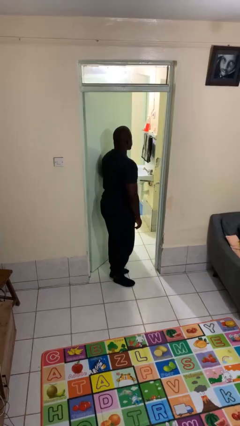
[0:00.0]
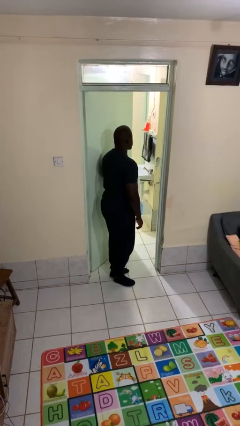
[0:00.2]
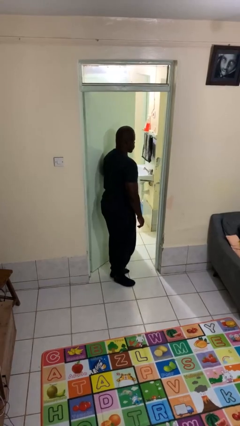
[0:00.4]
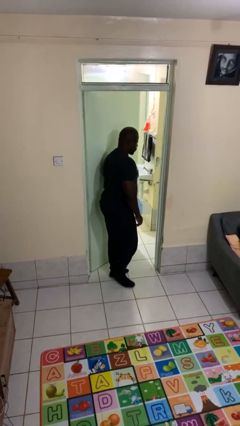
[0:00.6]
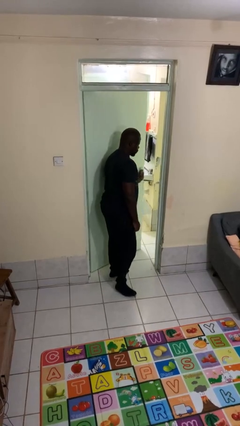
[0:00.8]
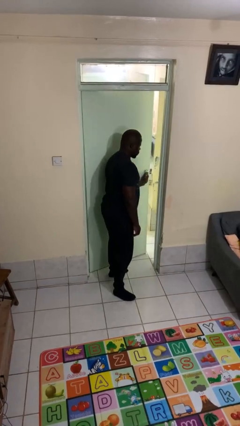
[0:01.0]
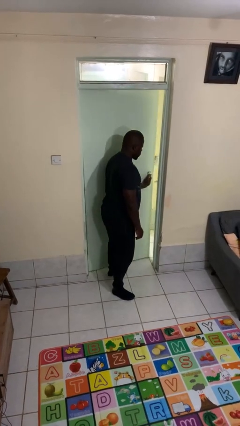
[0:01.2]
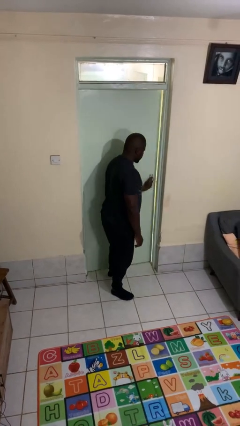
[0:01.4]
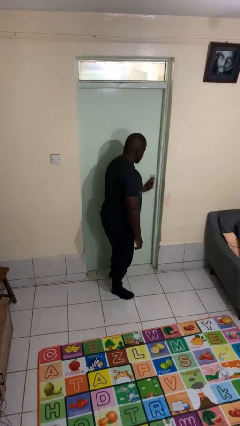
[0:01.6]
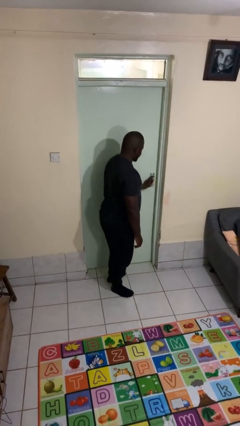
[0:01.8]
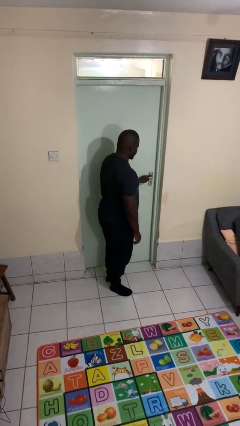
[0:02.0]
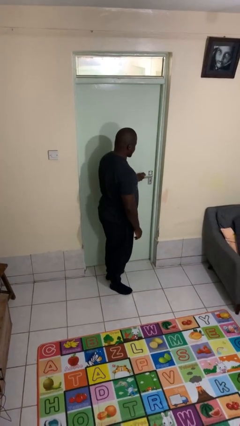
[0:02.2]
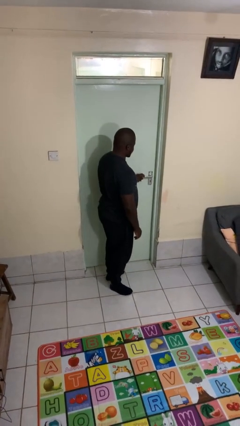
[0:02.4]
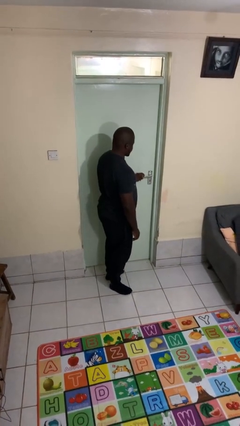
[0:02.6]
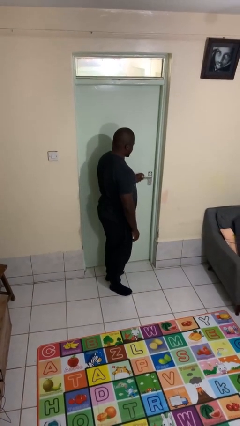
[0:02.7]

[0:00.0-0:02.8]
person closes facility door

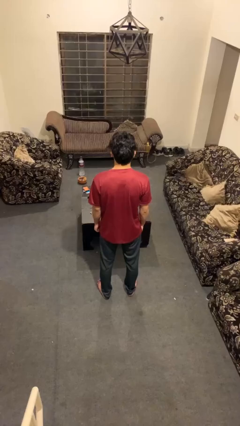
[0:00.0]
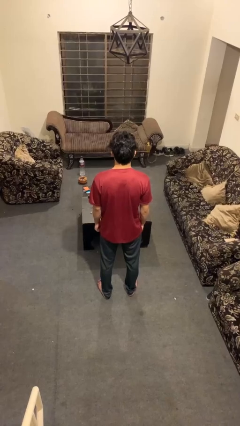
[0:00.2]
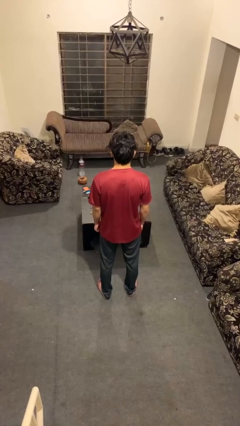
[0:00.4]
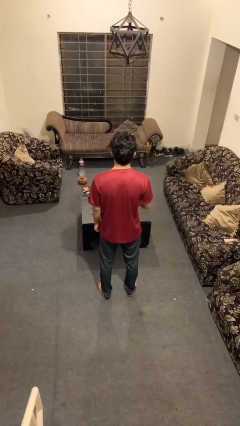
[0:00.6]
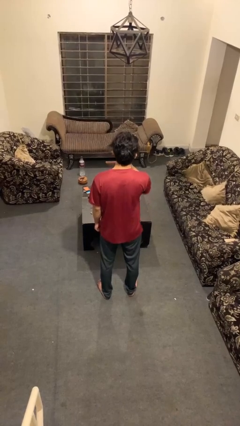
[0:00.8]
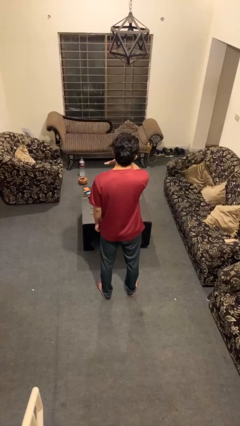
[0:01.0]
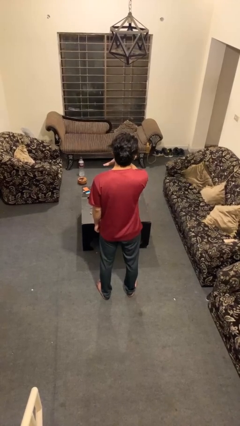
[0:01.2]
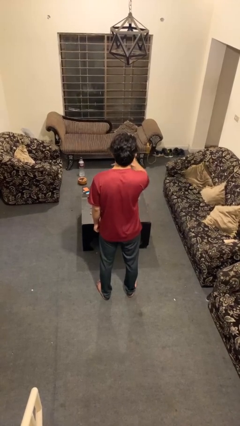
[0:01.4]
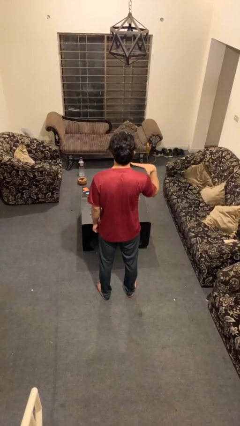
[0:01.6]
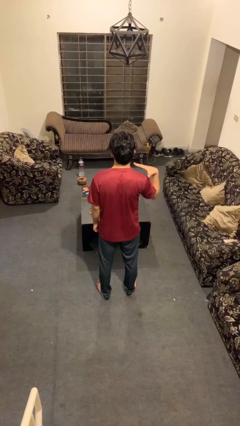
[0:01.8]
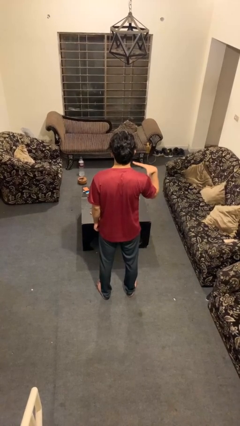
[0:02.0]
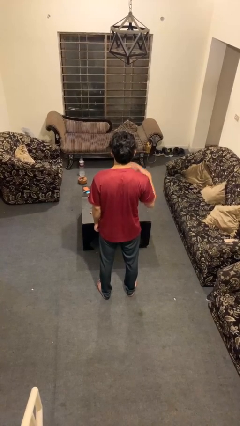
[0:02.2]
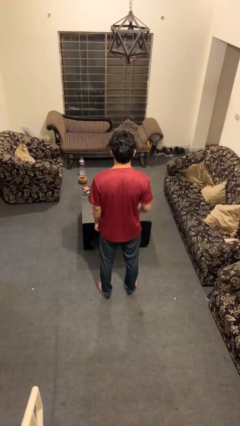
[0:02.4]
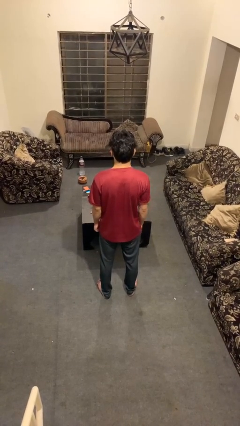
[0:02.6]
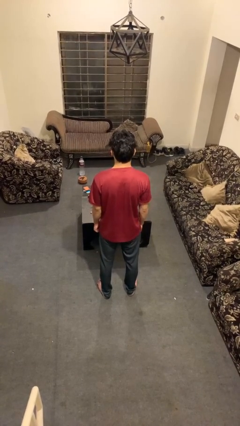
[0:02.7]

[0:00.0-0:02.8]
person gestures cut

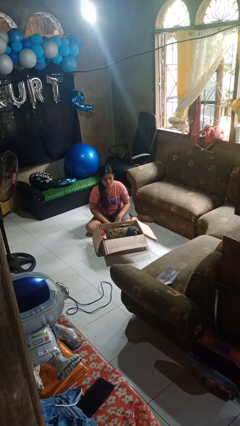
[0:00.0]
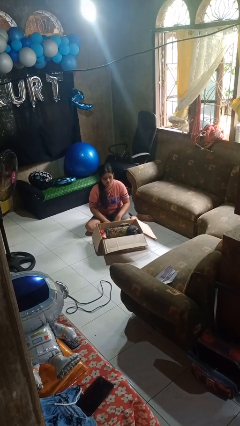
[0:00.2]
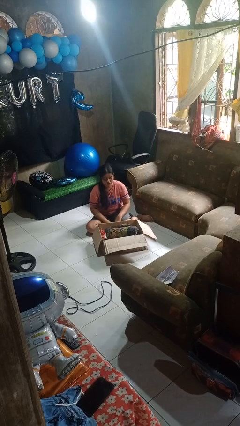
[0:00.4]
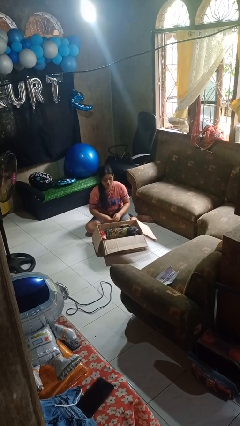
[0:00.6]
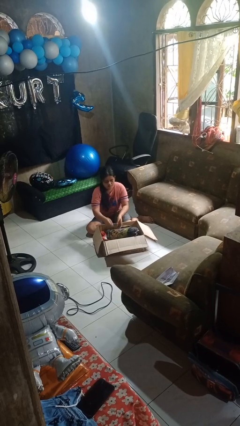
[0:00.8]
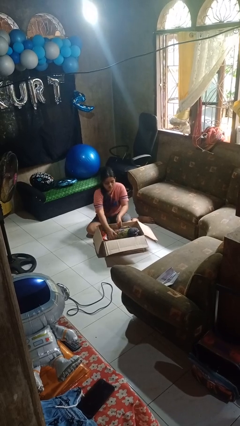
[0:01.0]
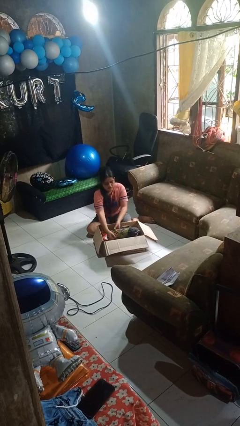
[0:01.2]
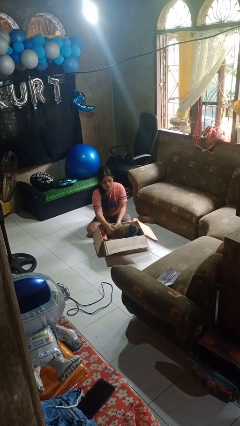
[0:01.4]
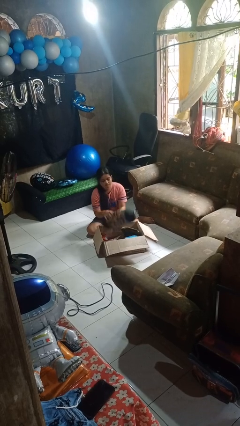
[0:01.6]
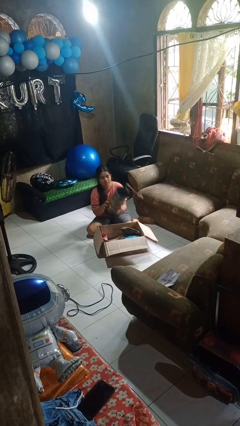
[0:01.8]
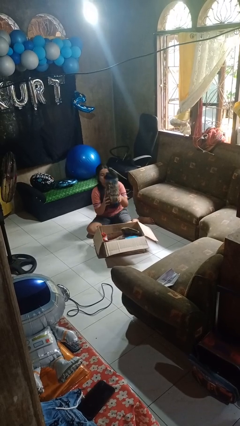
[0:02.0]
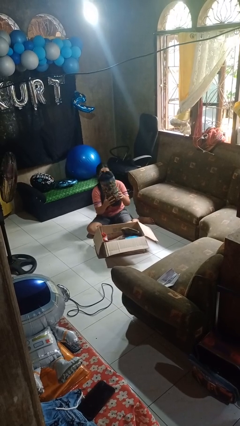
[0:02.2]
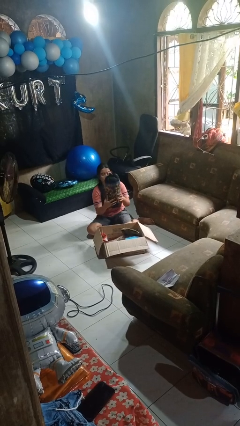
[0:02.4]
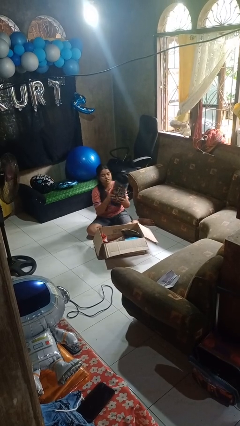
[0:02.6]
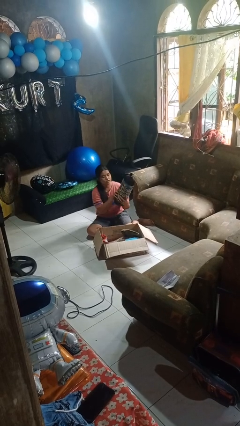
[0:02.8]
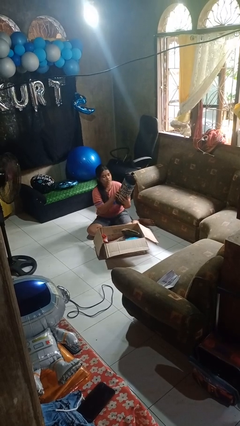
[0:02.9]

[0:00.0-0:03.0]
person takes object from box

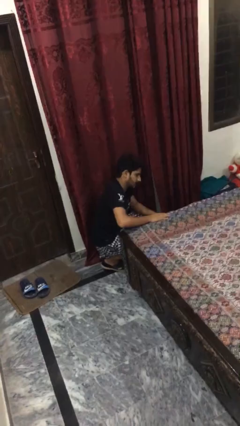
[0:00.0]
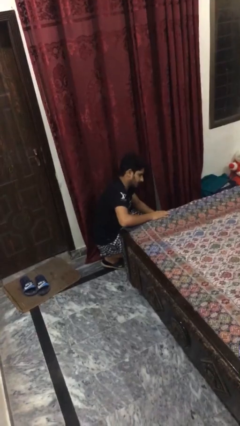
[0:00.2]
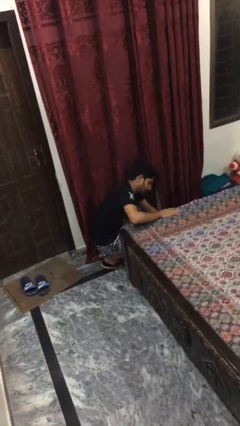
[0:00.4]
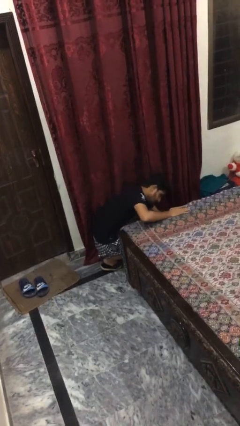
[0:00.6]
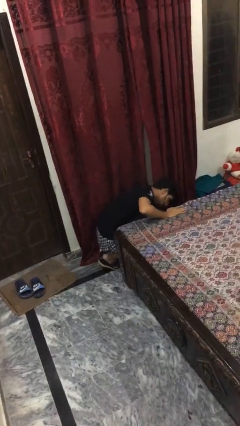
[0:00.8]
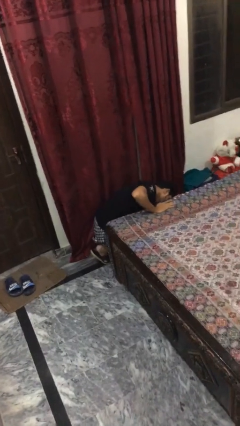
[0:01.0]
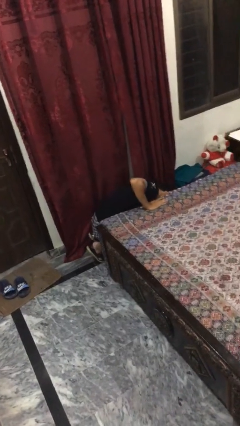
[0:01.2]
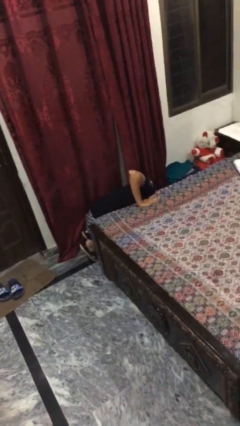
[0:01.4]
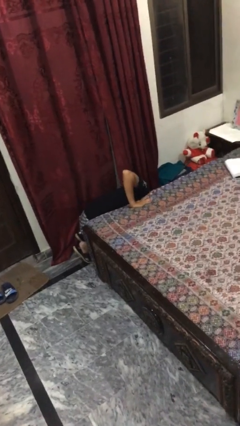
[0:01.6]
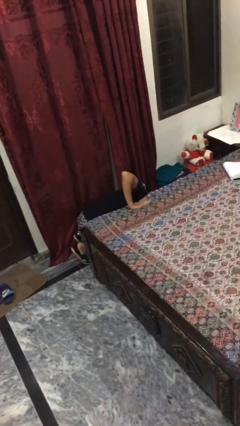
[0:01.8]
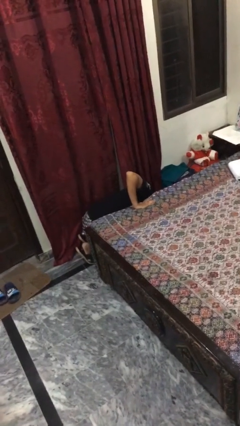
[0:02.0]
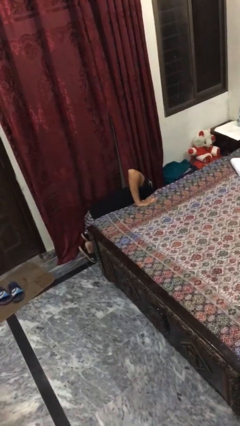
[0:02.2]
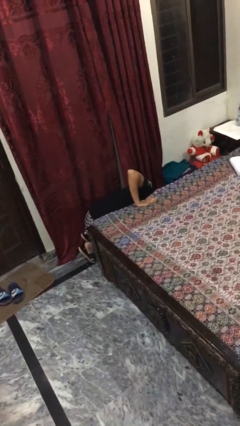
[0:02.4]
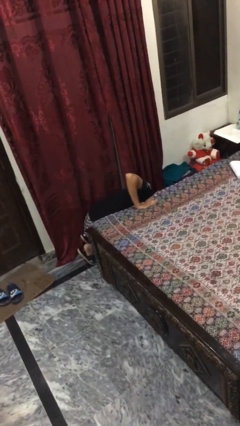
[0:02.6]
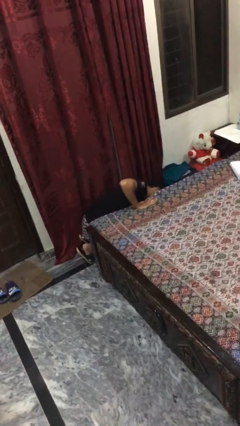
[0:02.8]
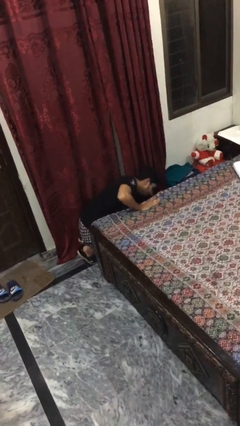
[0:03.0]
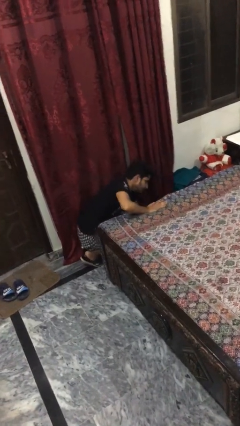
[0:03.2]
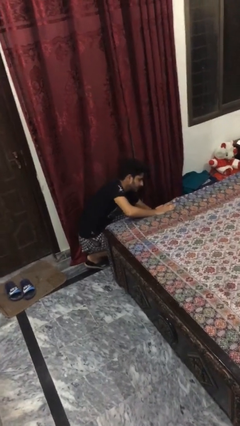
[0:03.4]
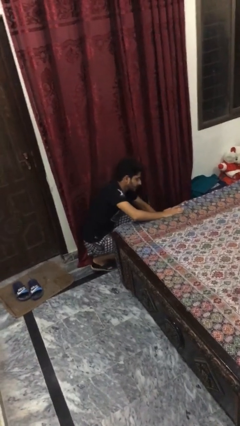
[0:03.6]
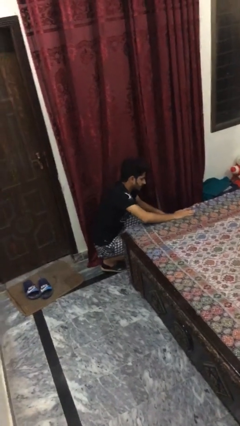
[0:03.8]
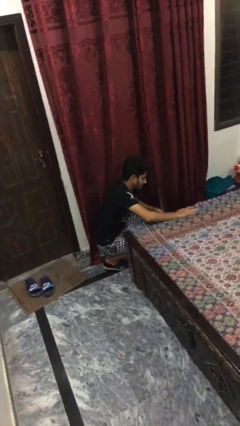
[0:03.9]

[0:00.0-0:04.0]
person searches under bed

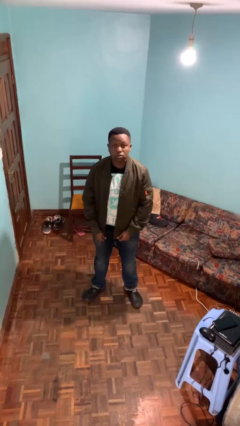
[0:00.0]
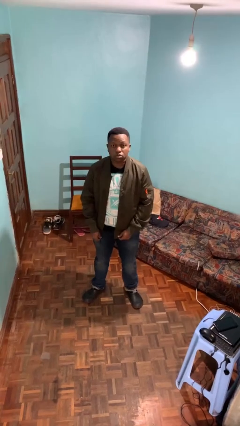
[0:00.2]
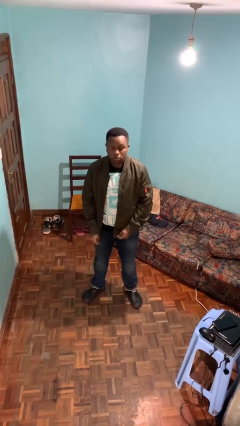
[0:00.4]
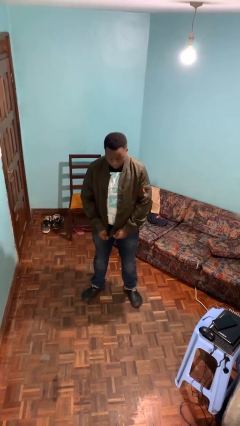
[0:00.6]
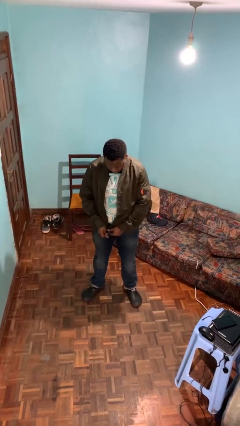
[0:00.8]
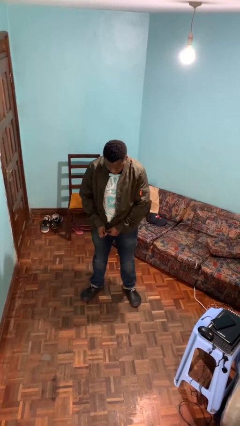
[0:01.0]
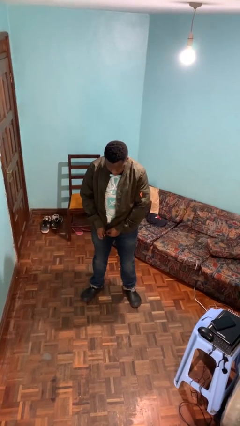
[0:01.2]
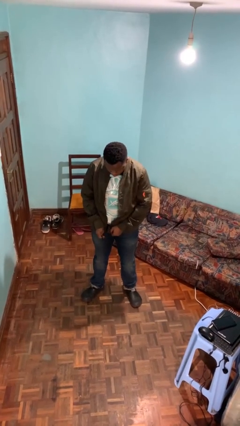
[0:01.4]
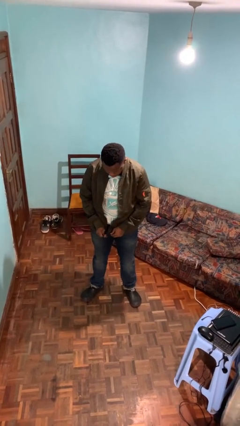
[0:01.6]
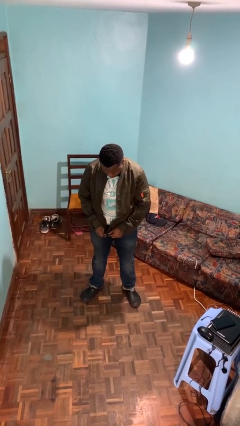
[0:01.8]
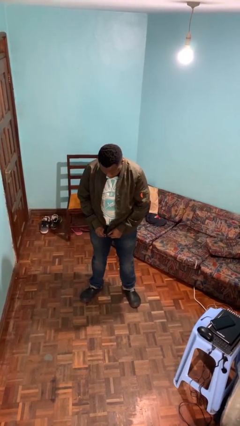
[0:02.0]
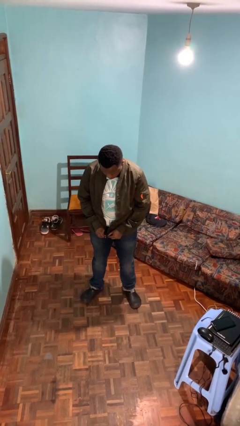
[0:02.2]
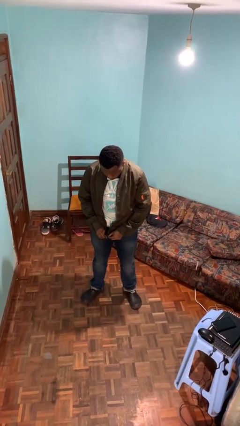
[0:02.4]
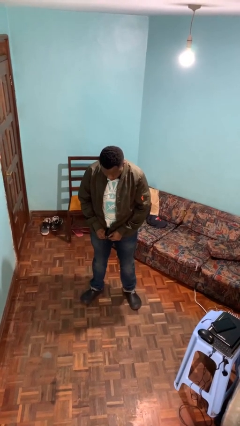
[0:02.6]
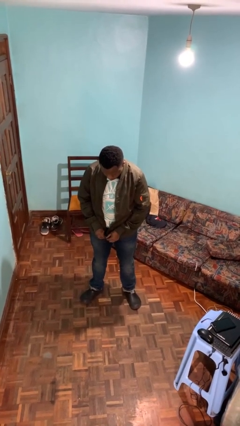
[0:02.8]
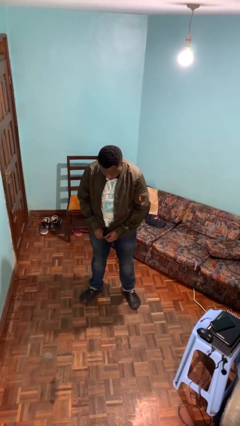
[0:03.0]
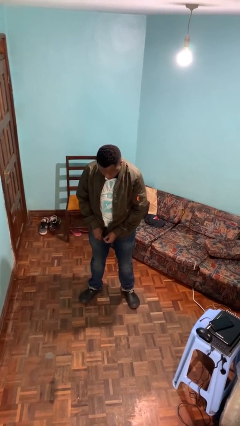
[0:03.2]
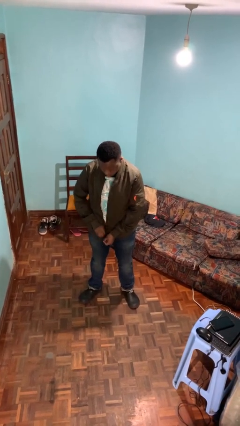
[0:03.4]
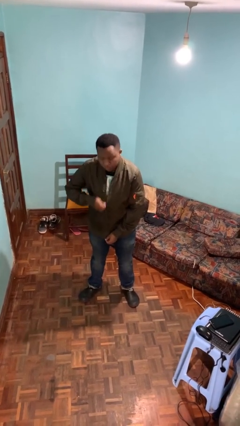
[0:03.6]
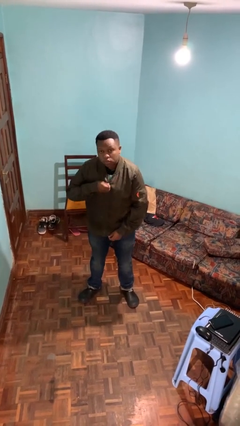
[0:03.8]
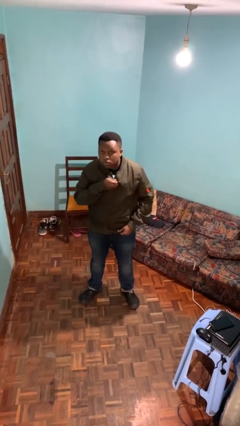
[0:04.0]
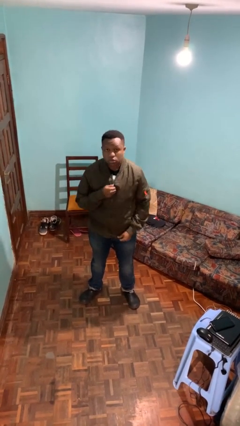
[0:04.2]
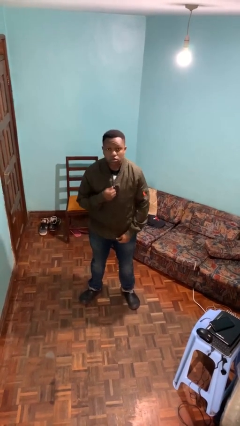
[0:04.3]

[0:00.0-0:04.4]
person zips up jacket

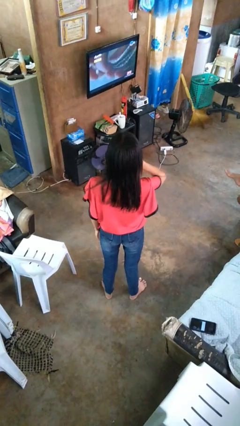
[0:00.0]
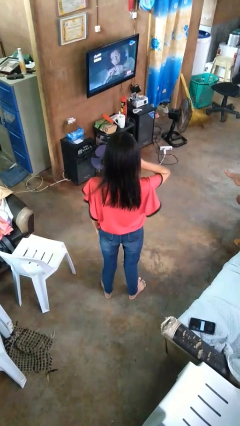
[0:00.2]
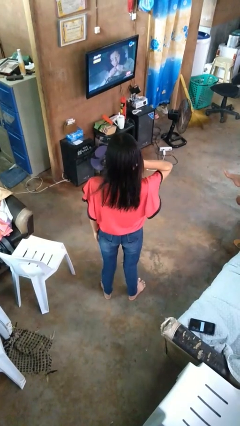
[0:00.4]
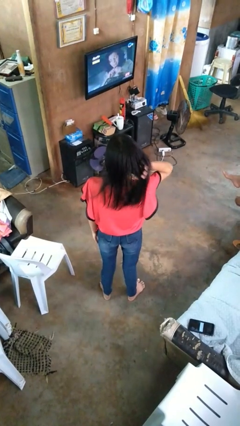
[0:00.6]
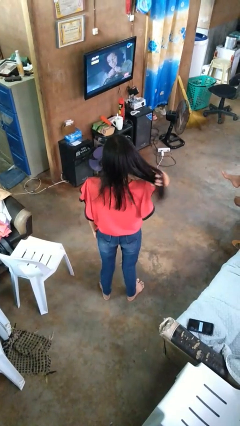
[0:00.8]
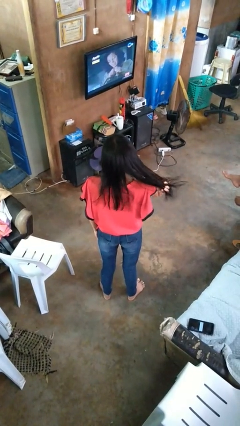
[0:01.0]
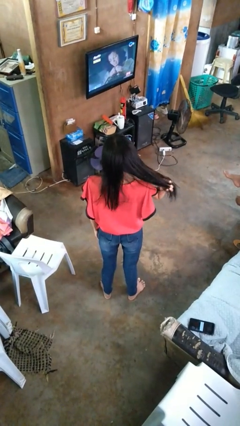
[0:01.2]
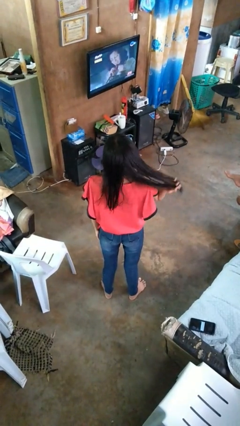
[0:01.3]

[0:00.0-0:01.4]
person strokes hair
